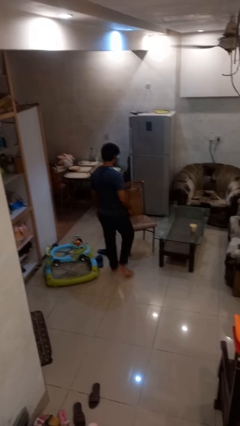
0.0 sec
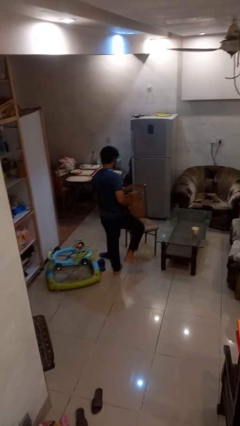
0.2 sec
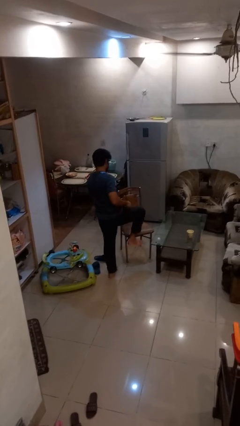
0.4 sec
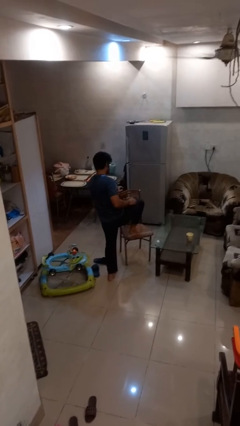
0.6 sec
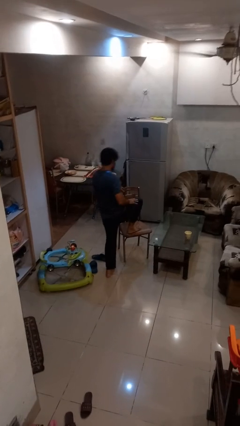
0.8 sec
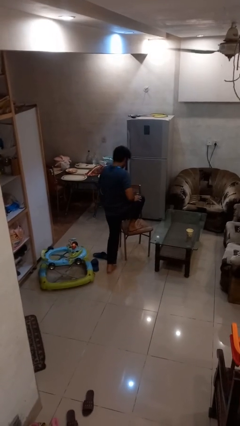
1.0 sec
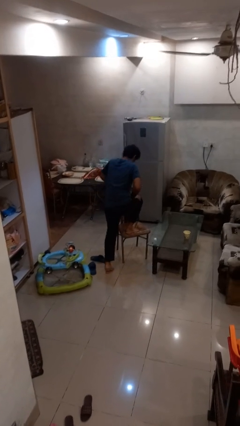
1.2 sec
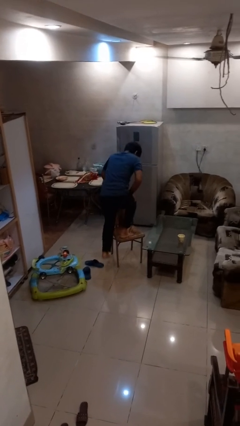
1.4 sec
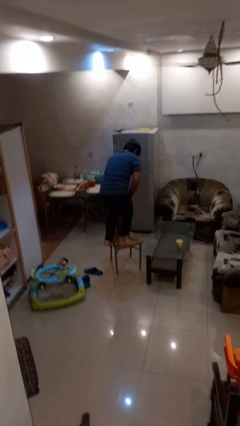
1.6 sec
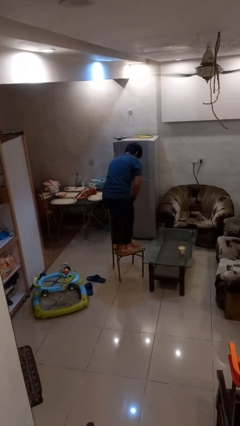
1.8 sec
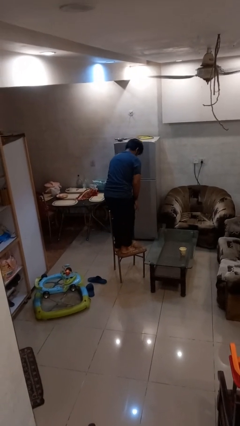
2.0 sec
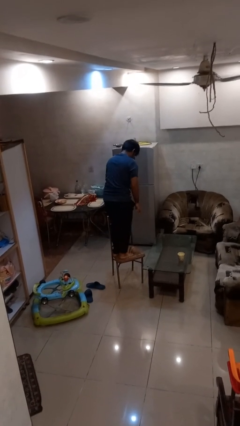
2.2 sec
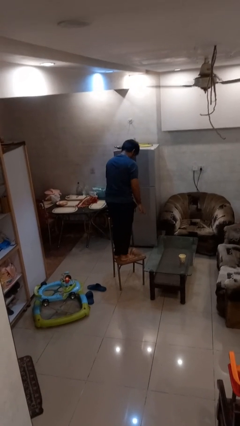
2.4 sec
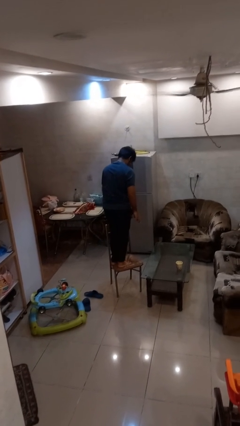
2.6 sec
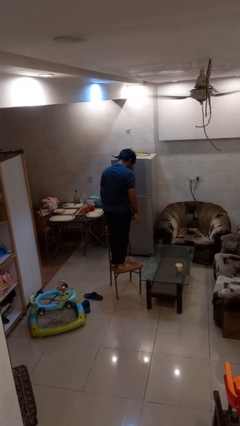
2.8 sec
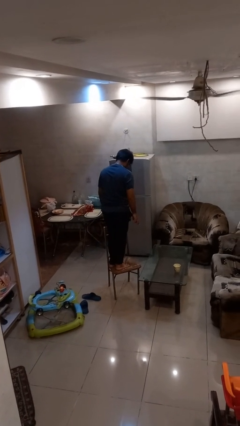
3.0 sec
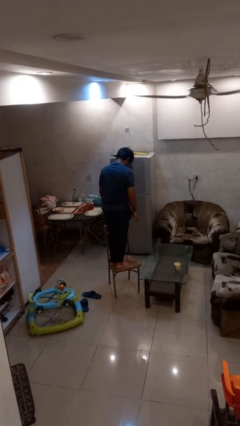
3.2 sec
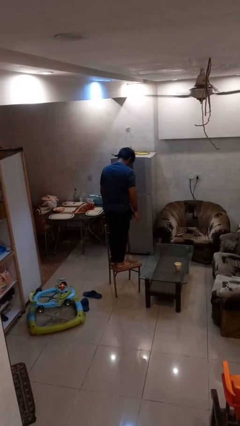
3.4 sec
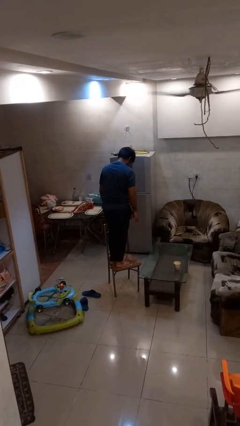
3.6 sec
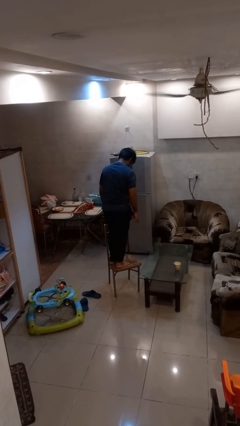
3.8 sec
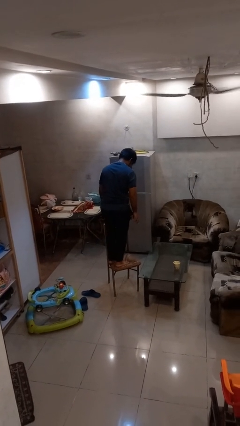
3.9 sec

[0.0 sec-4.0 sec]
person climbs on chair

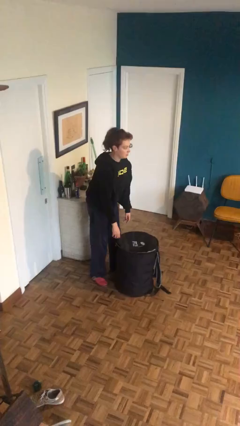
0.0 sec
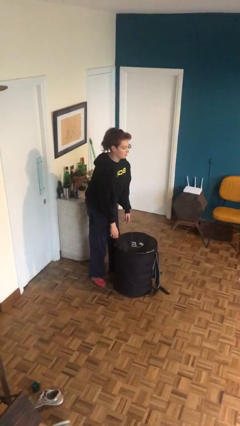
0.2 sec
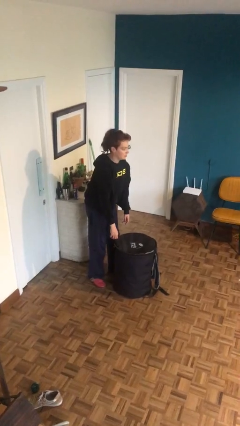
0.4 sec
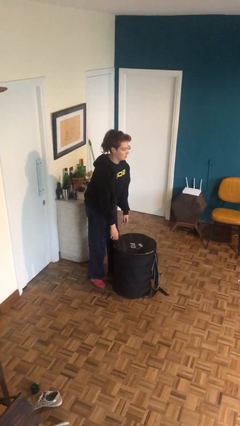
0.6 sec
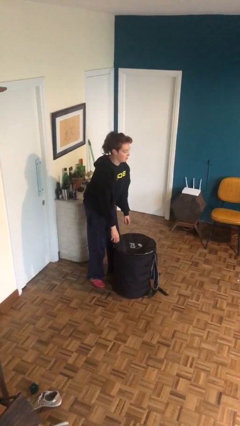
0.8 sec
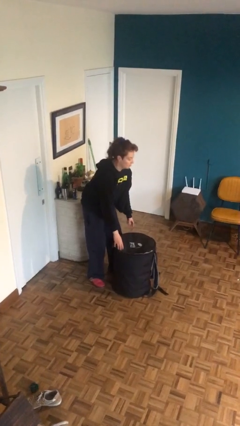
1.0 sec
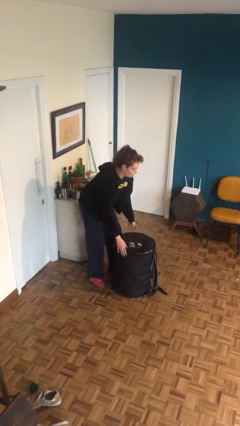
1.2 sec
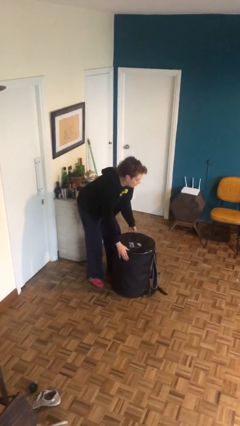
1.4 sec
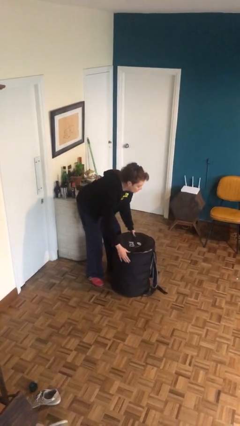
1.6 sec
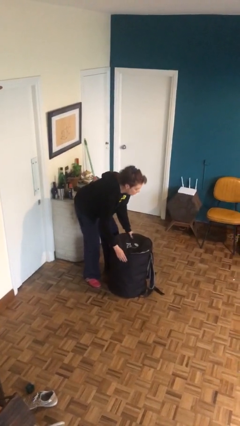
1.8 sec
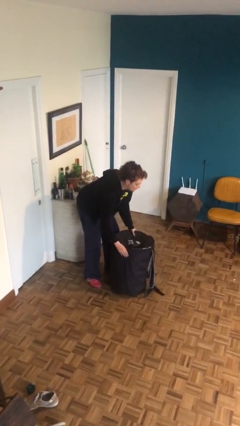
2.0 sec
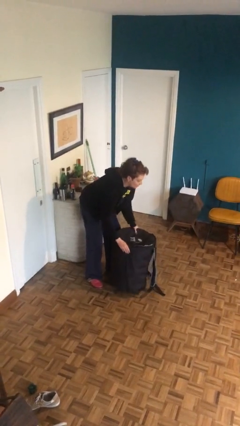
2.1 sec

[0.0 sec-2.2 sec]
person picks up object from floor

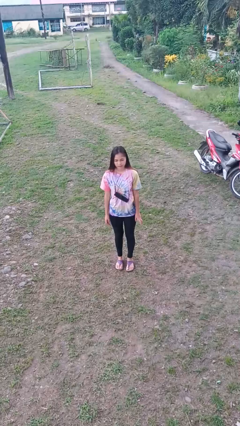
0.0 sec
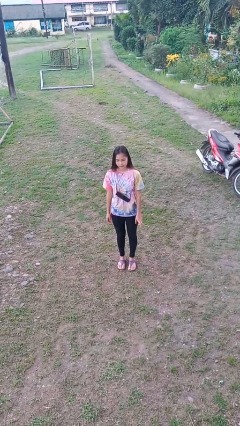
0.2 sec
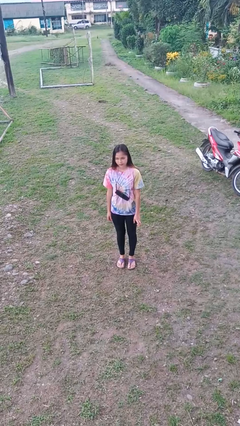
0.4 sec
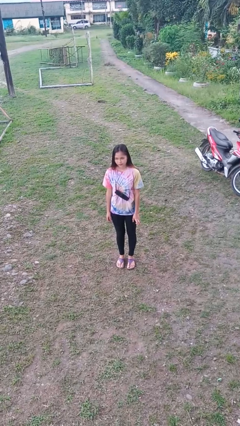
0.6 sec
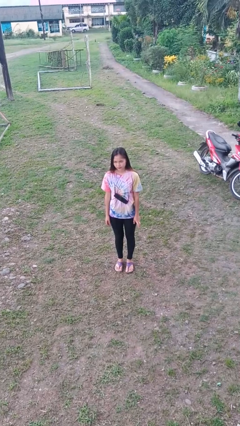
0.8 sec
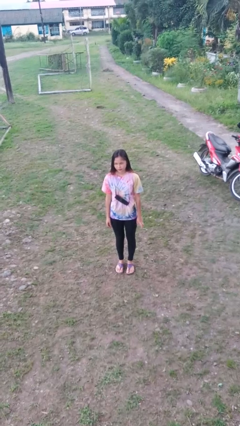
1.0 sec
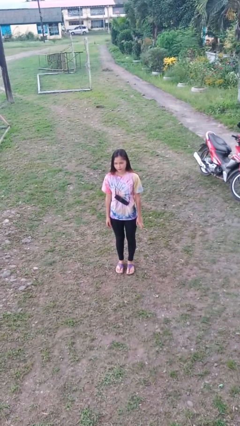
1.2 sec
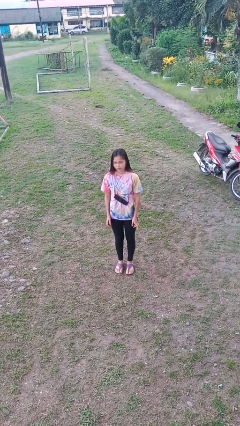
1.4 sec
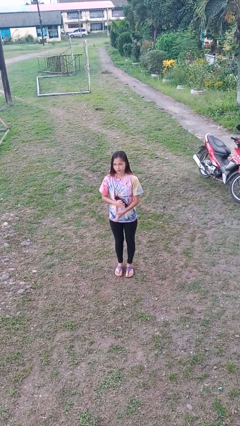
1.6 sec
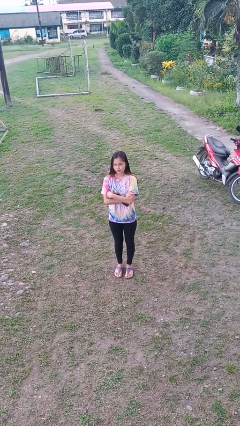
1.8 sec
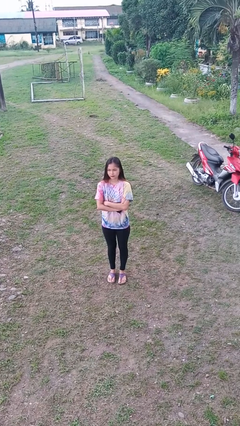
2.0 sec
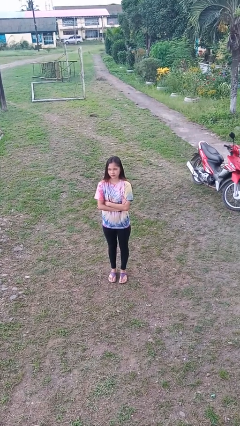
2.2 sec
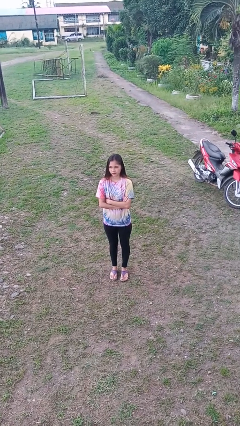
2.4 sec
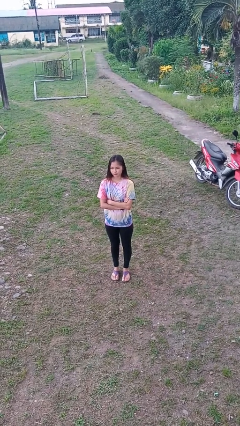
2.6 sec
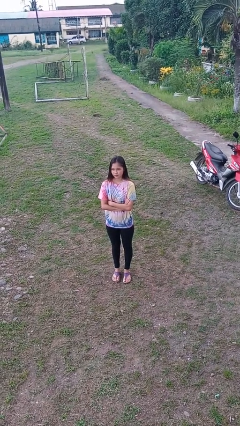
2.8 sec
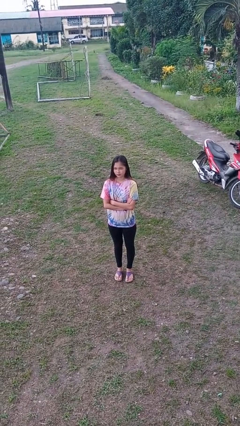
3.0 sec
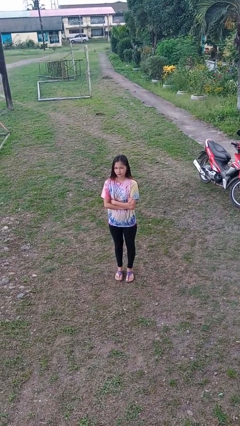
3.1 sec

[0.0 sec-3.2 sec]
person crosses arms

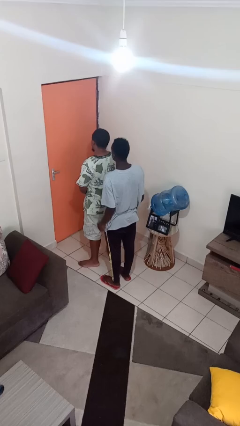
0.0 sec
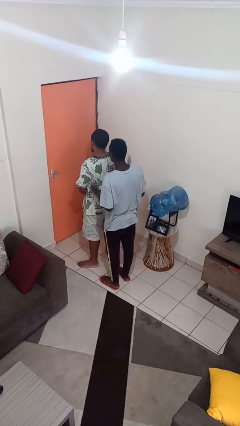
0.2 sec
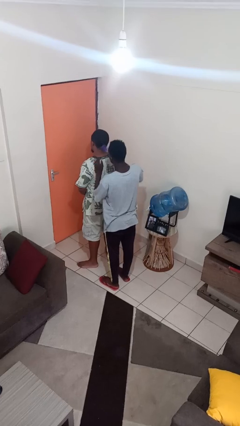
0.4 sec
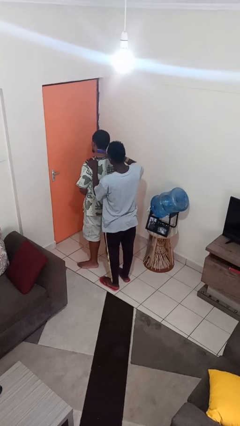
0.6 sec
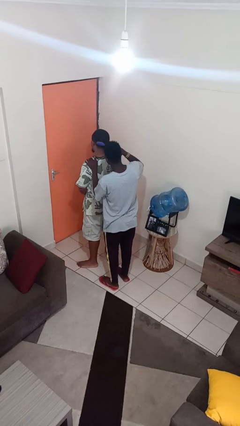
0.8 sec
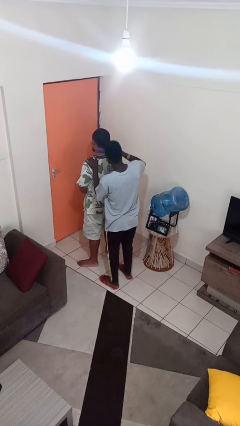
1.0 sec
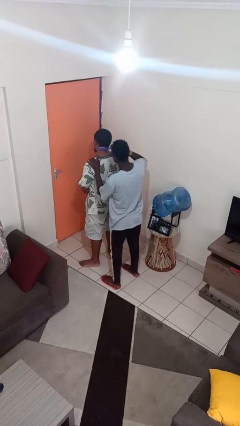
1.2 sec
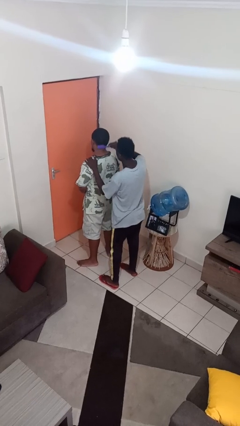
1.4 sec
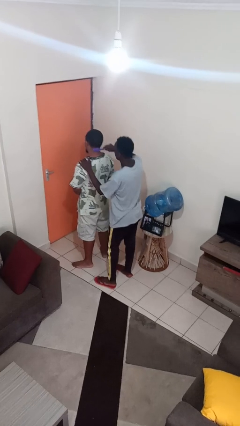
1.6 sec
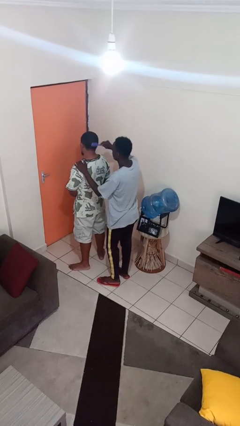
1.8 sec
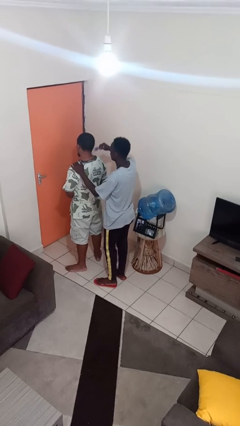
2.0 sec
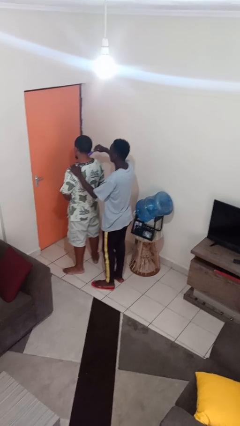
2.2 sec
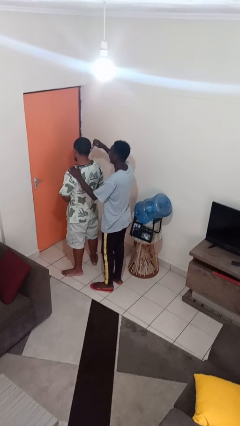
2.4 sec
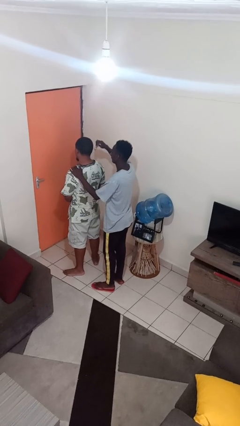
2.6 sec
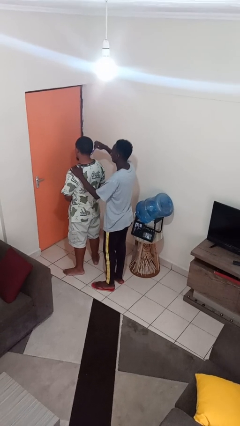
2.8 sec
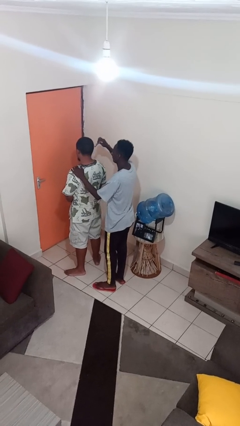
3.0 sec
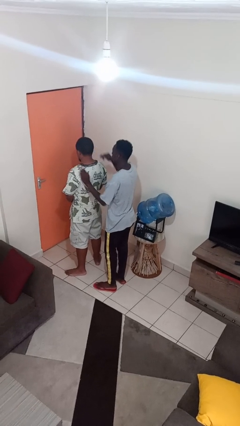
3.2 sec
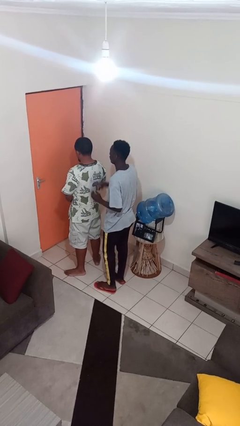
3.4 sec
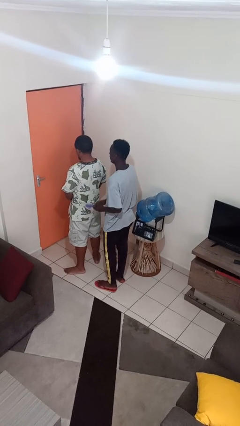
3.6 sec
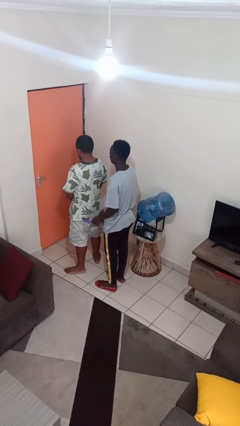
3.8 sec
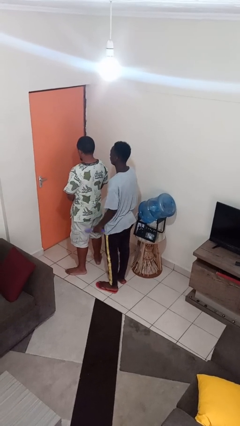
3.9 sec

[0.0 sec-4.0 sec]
person brushes hair of person

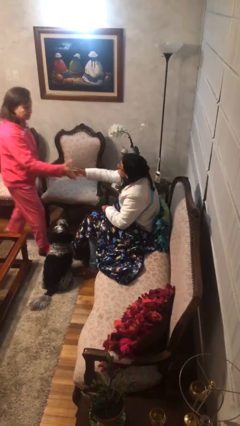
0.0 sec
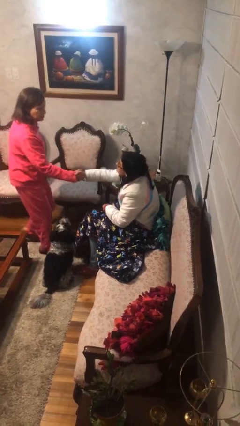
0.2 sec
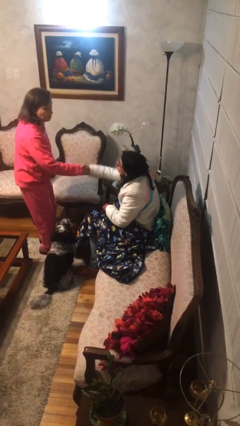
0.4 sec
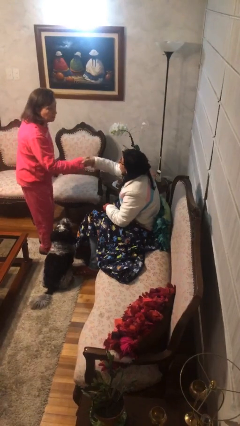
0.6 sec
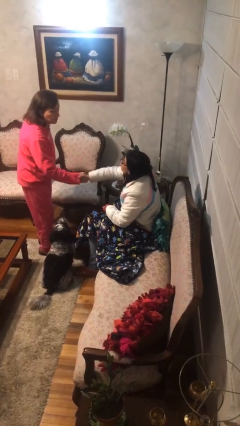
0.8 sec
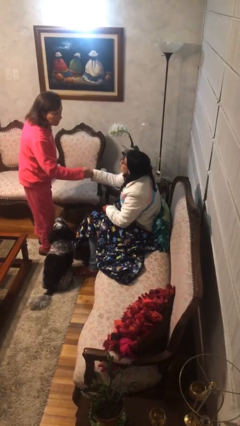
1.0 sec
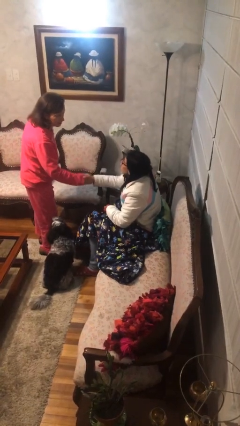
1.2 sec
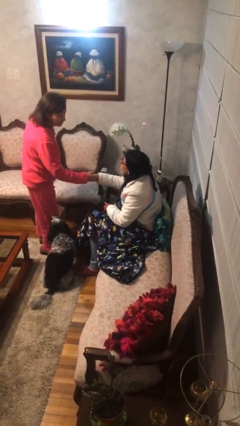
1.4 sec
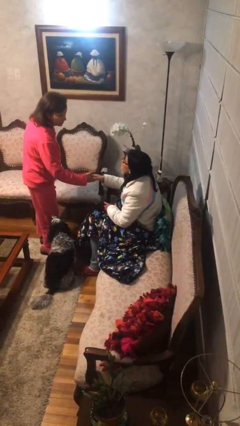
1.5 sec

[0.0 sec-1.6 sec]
person shakes hand

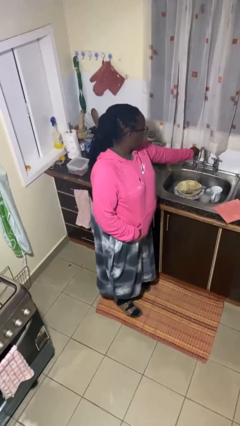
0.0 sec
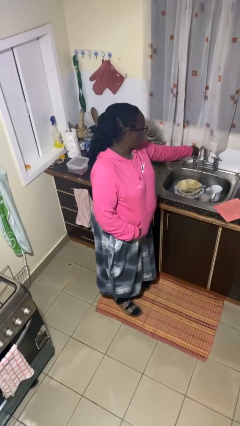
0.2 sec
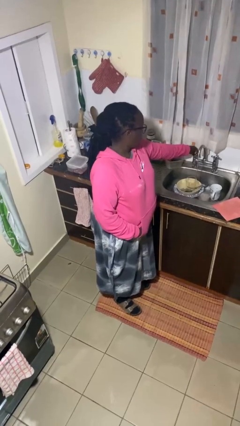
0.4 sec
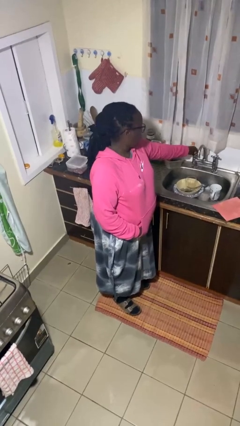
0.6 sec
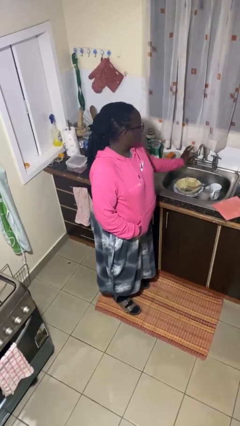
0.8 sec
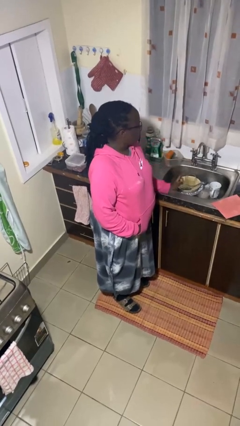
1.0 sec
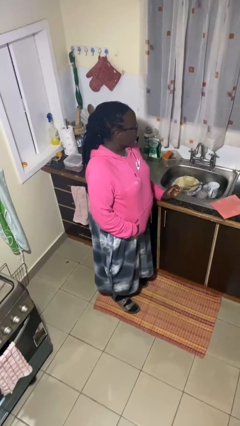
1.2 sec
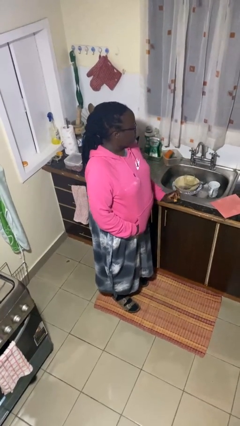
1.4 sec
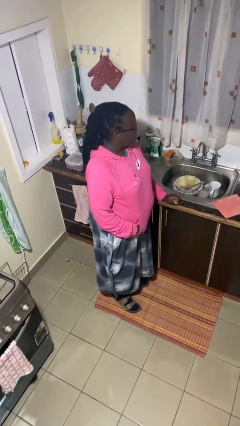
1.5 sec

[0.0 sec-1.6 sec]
person turns off faucet

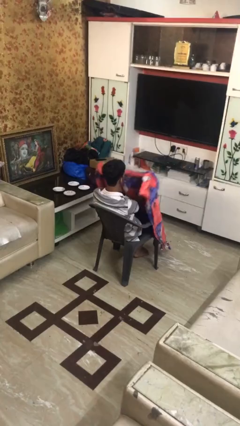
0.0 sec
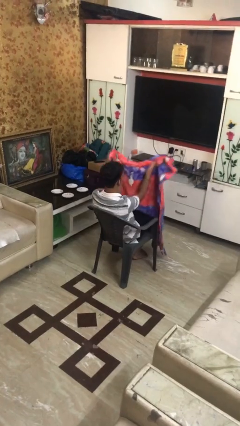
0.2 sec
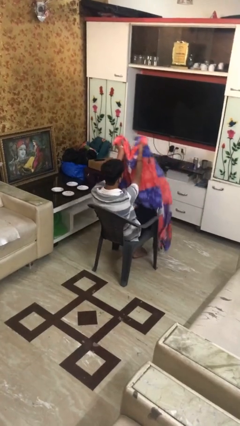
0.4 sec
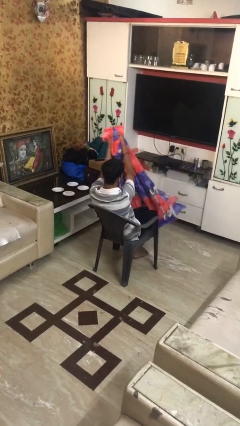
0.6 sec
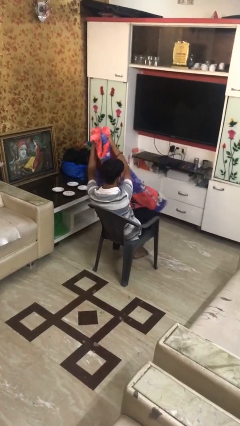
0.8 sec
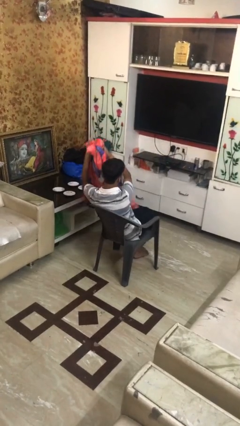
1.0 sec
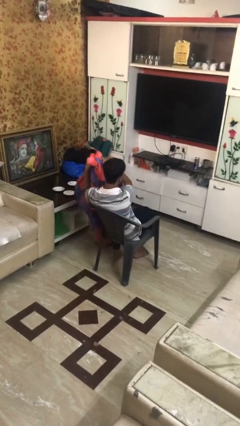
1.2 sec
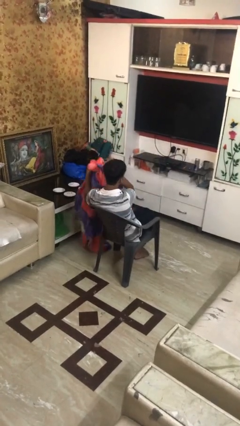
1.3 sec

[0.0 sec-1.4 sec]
person uncovers with blanket
